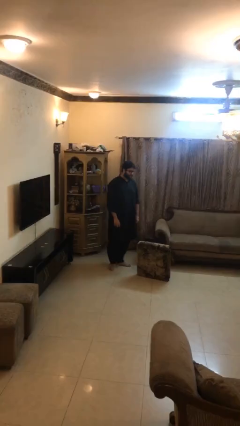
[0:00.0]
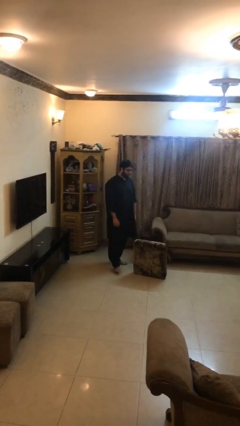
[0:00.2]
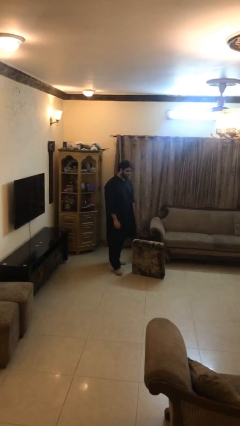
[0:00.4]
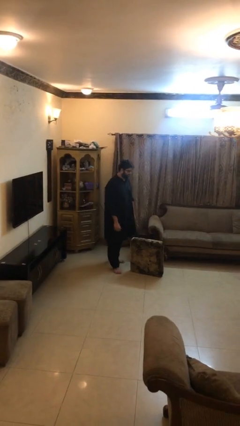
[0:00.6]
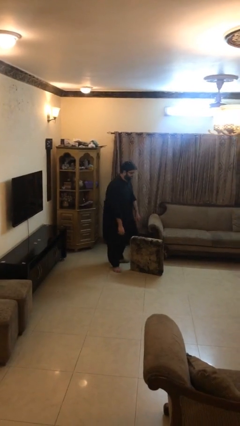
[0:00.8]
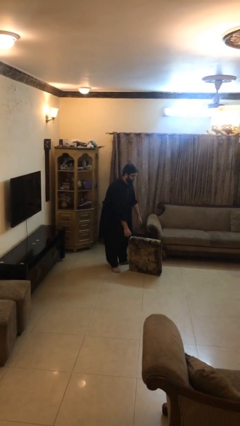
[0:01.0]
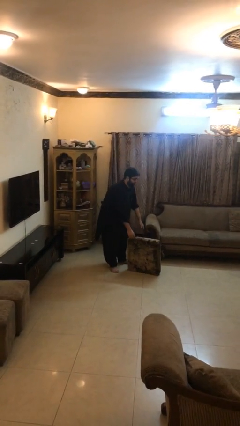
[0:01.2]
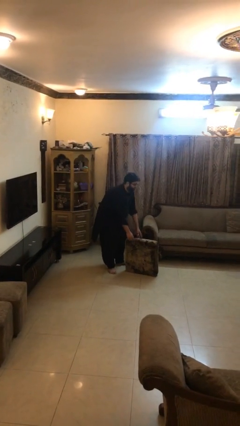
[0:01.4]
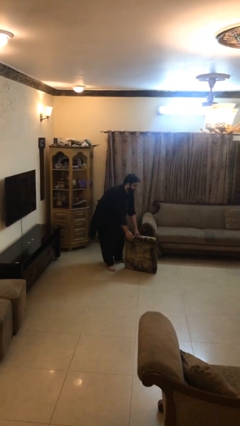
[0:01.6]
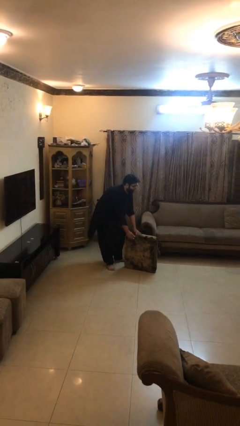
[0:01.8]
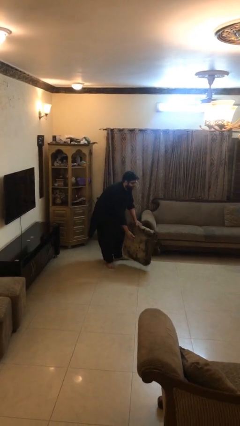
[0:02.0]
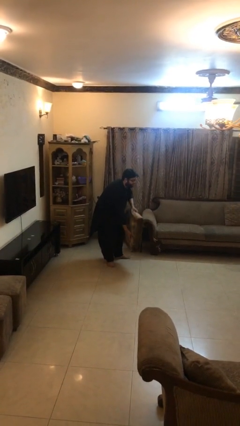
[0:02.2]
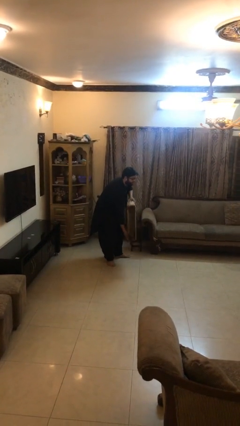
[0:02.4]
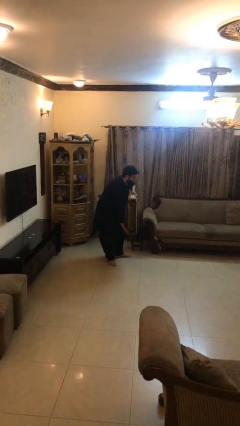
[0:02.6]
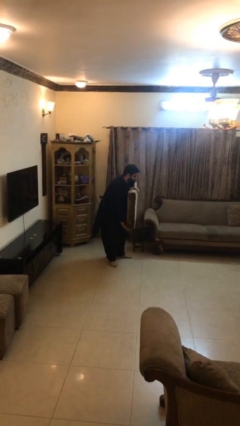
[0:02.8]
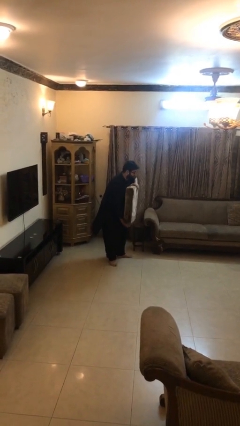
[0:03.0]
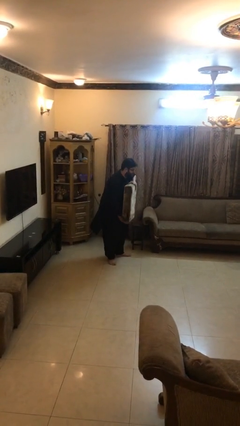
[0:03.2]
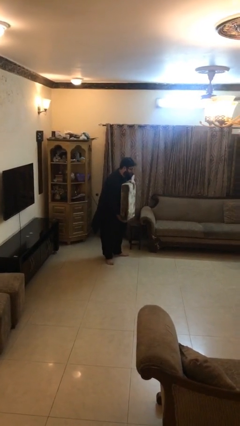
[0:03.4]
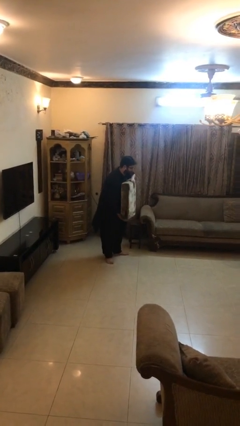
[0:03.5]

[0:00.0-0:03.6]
person picks up object from floor

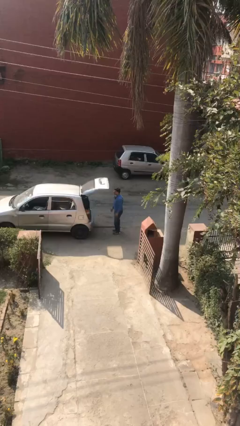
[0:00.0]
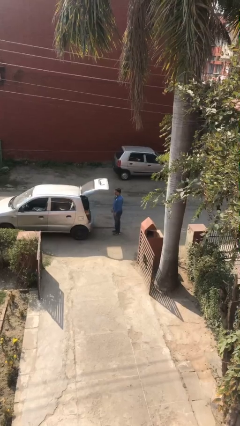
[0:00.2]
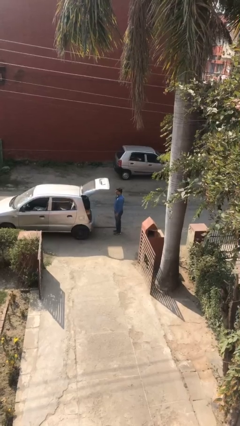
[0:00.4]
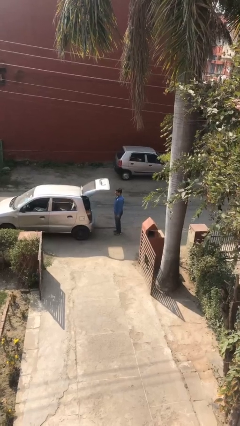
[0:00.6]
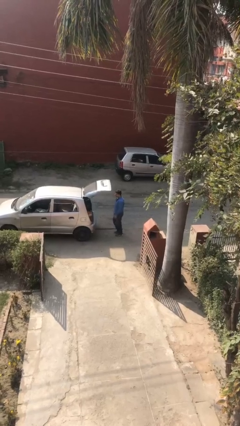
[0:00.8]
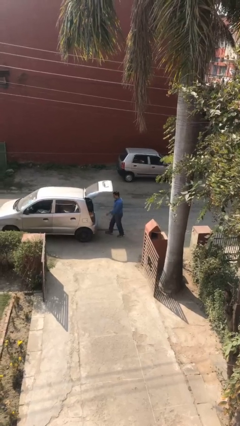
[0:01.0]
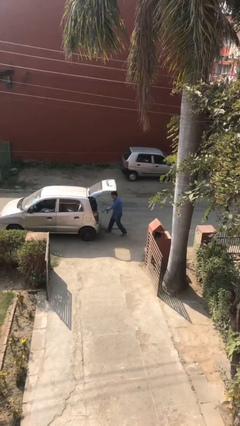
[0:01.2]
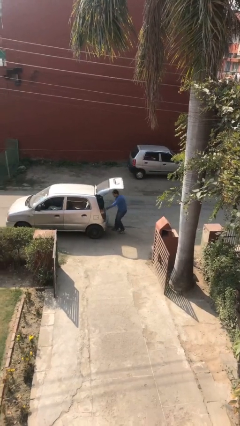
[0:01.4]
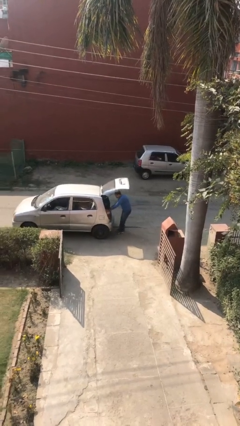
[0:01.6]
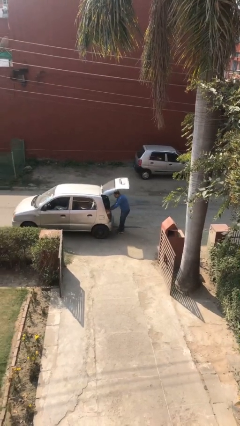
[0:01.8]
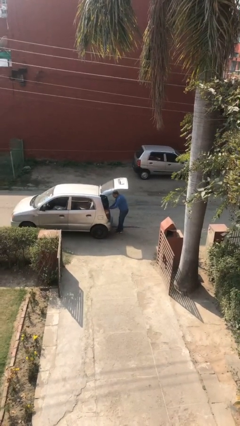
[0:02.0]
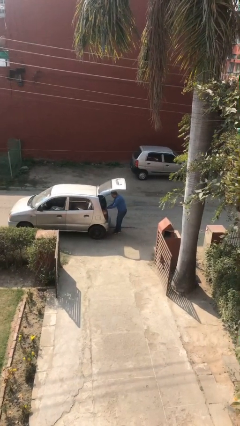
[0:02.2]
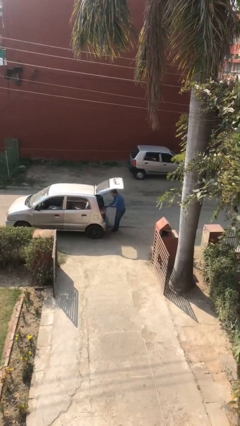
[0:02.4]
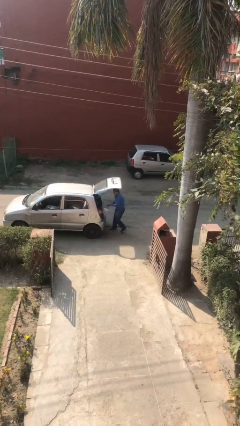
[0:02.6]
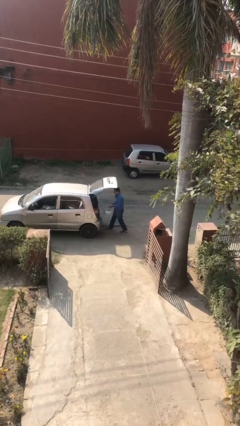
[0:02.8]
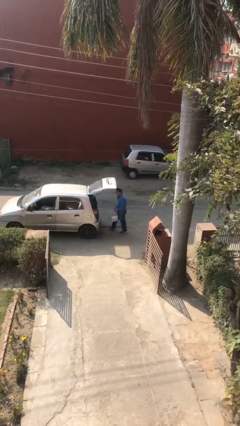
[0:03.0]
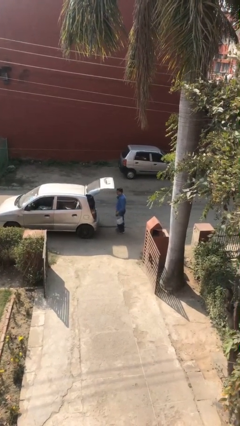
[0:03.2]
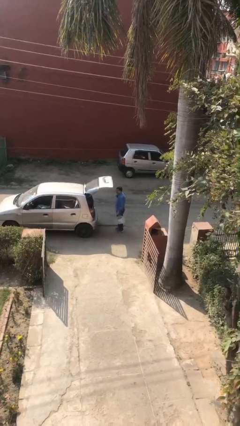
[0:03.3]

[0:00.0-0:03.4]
person unloads car

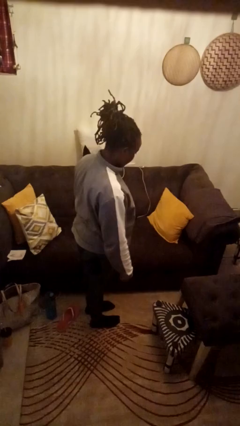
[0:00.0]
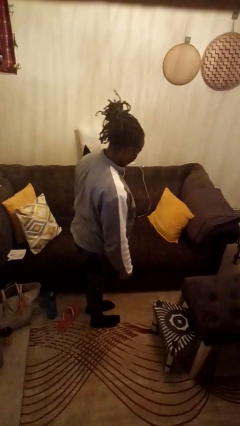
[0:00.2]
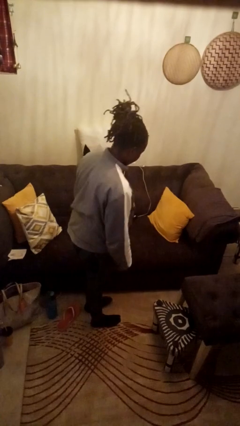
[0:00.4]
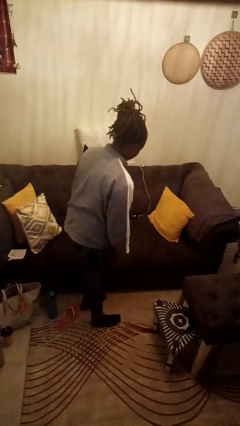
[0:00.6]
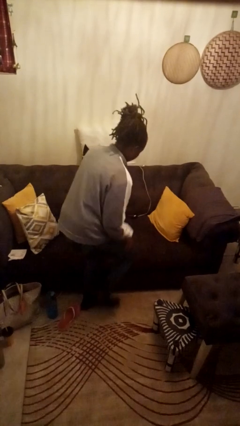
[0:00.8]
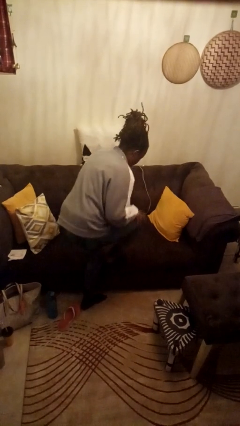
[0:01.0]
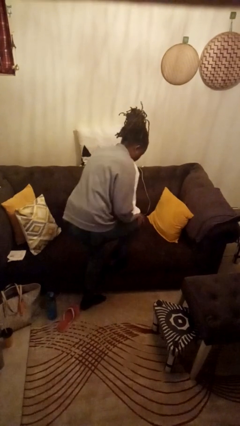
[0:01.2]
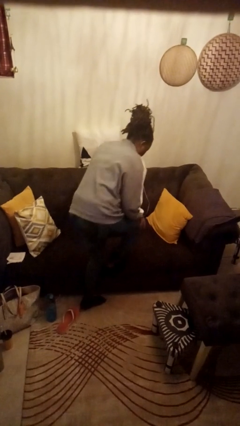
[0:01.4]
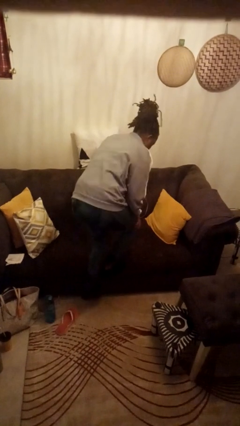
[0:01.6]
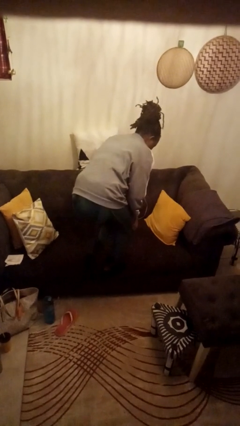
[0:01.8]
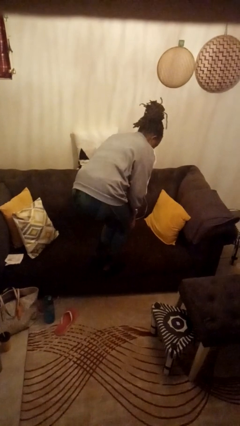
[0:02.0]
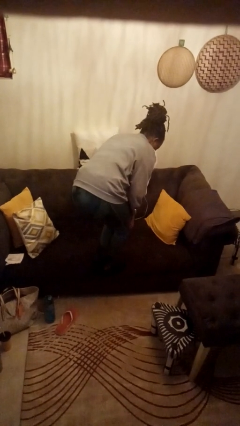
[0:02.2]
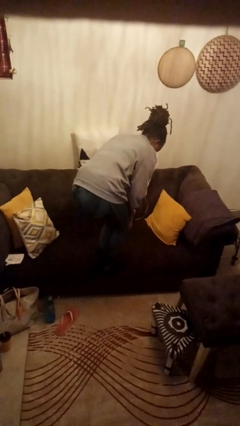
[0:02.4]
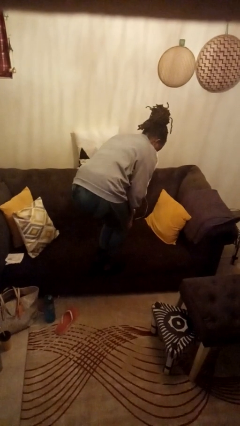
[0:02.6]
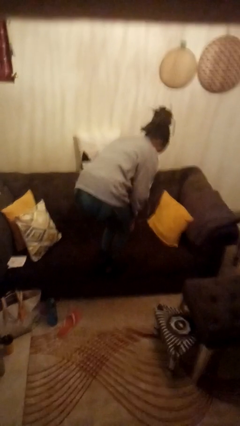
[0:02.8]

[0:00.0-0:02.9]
person climbs on chair

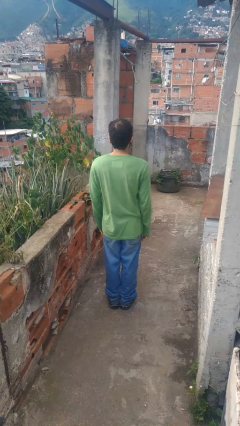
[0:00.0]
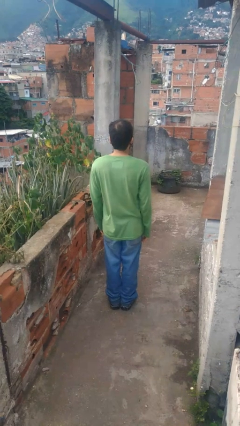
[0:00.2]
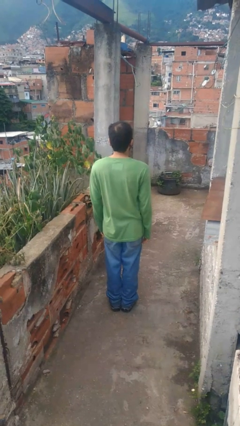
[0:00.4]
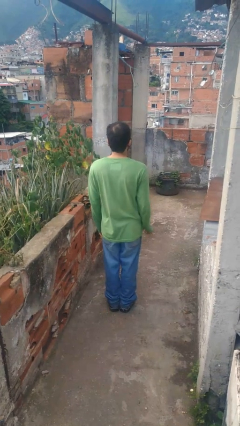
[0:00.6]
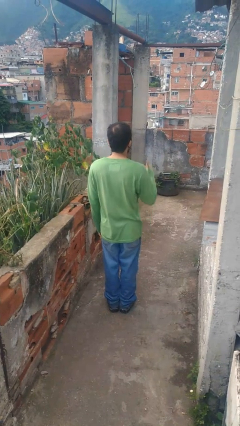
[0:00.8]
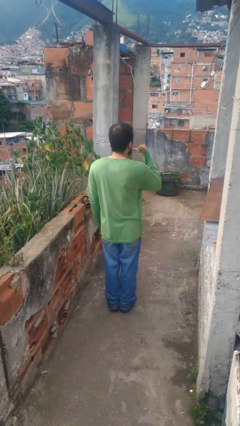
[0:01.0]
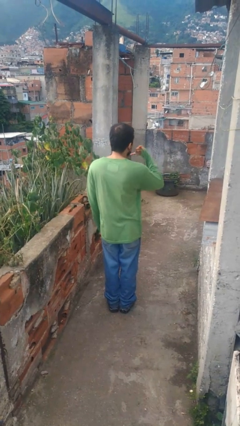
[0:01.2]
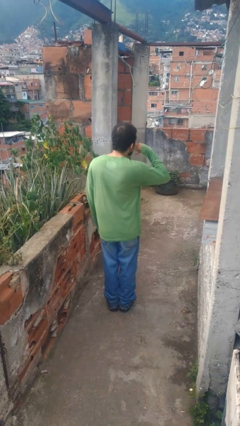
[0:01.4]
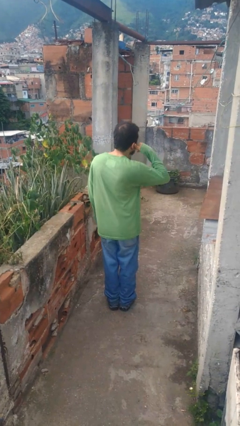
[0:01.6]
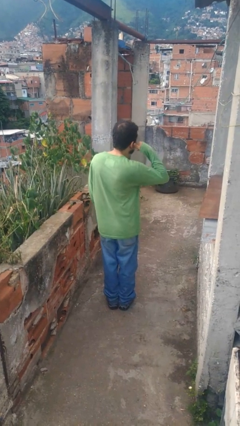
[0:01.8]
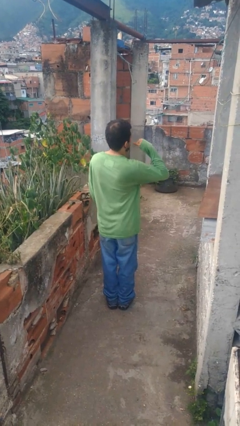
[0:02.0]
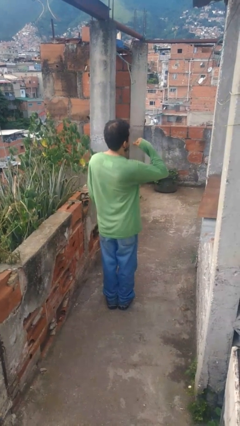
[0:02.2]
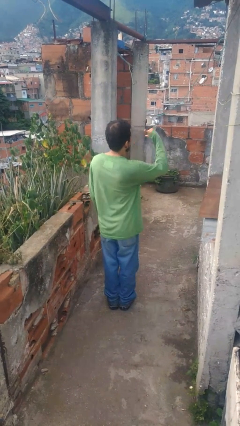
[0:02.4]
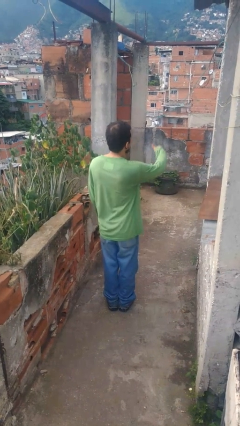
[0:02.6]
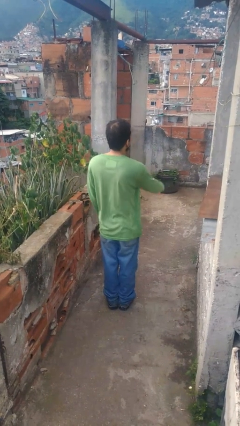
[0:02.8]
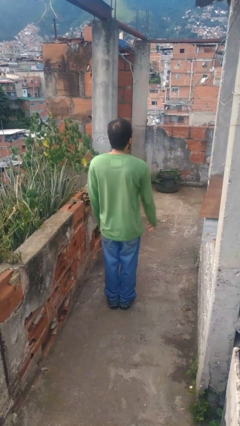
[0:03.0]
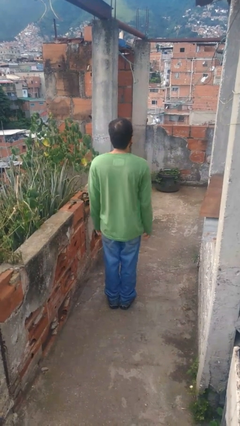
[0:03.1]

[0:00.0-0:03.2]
person gestures call me

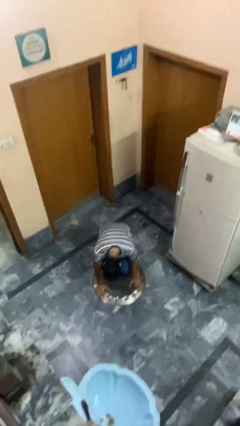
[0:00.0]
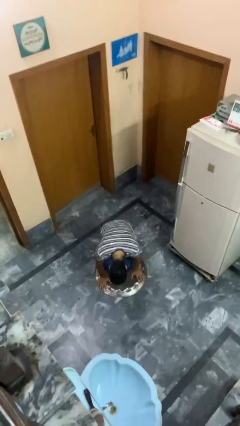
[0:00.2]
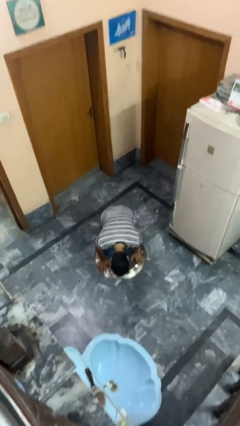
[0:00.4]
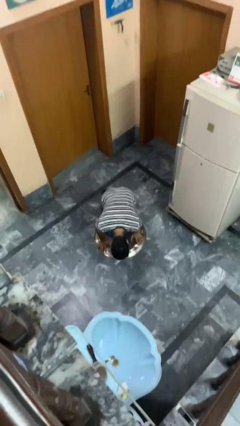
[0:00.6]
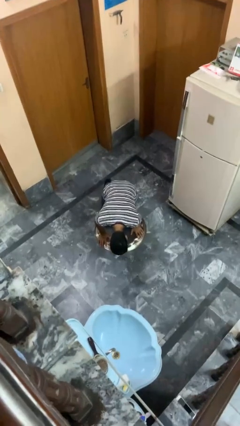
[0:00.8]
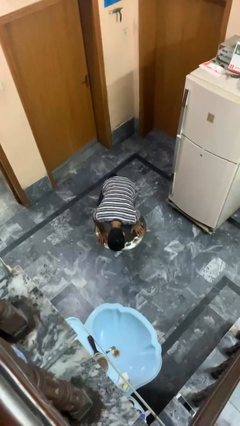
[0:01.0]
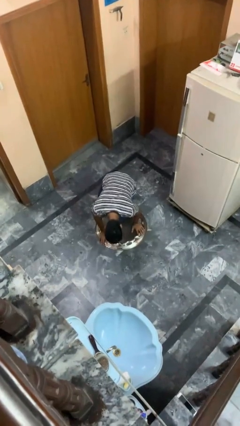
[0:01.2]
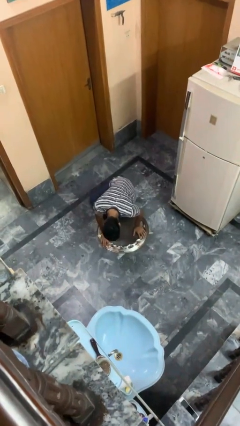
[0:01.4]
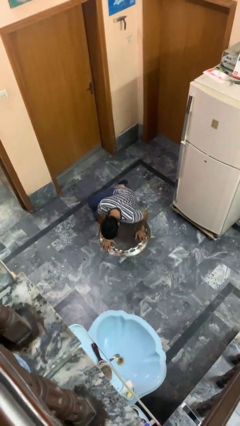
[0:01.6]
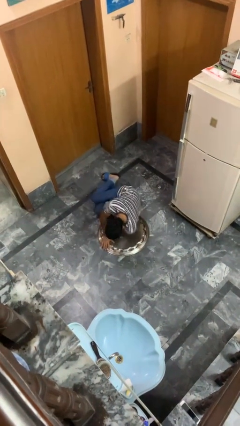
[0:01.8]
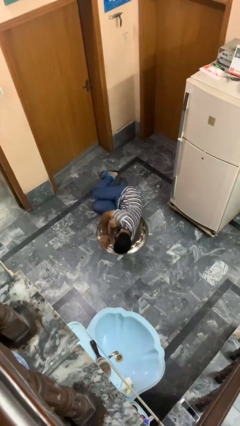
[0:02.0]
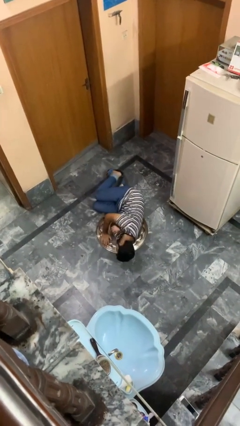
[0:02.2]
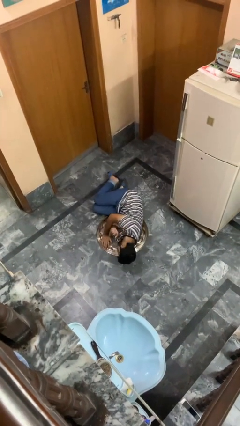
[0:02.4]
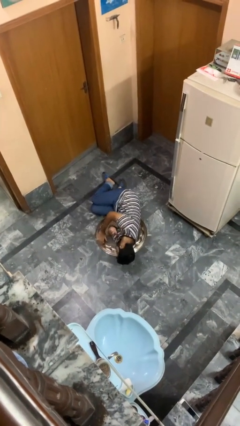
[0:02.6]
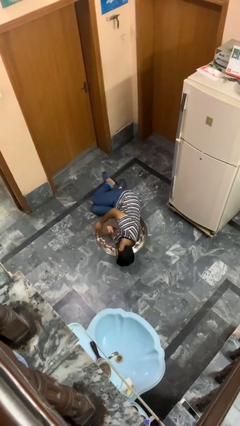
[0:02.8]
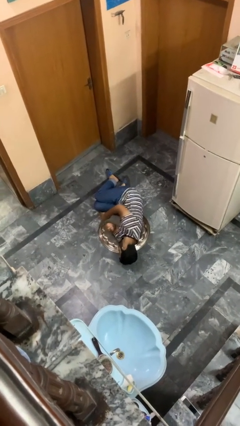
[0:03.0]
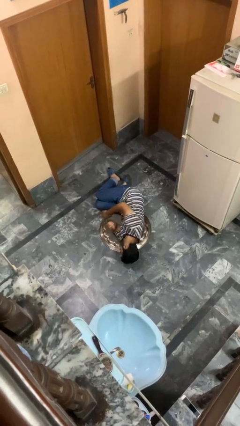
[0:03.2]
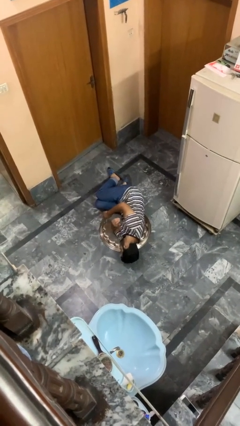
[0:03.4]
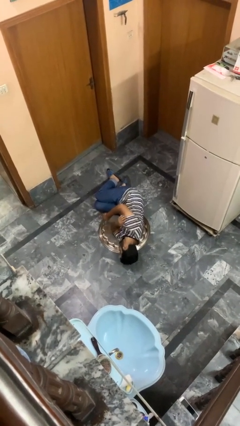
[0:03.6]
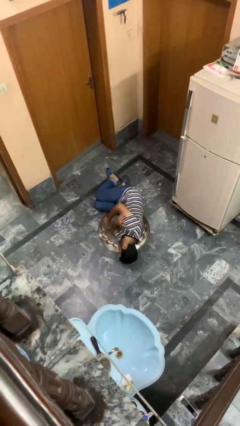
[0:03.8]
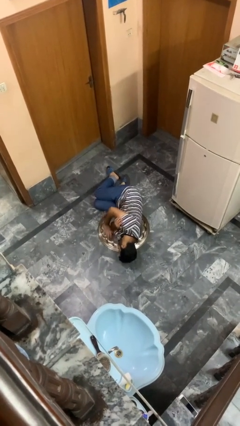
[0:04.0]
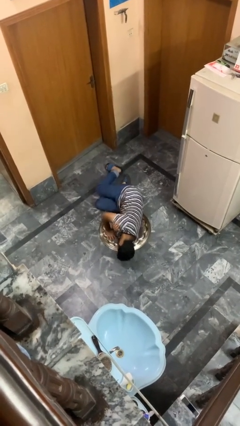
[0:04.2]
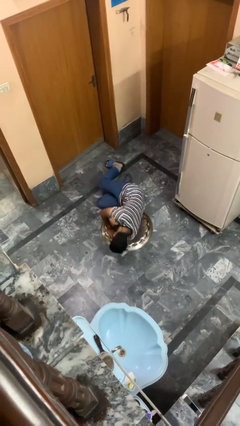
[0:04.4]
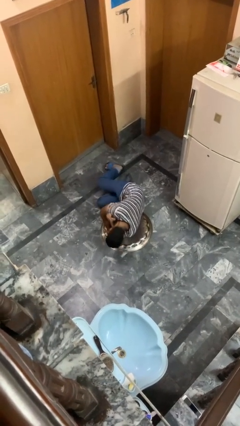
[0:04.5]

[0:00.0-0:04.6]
person lies down on floor
